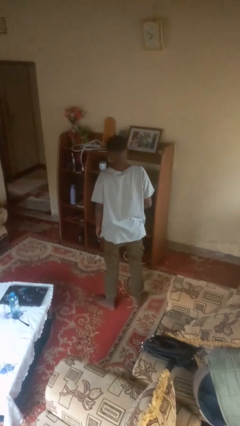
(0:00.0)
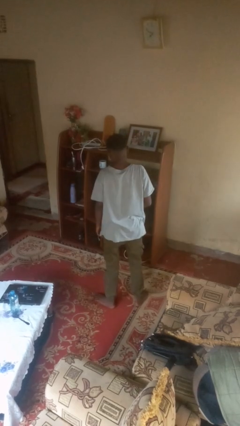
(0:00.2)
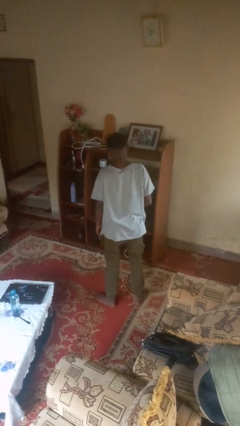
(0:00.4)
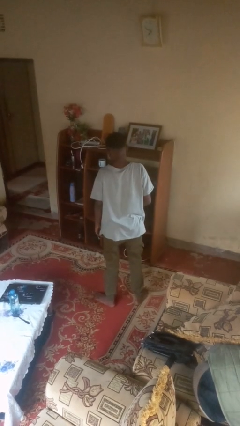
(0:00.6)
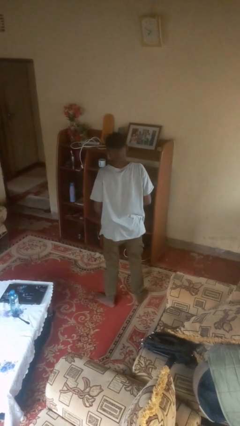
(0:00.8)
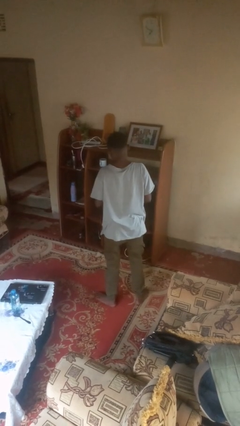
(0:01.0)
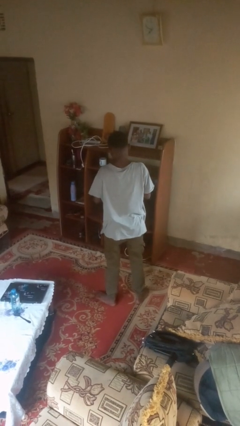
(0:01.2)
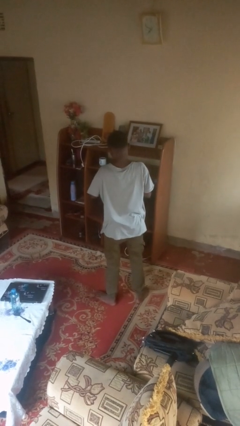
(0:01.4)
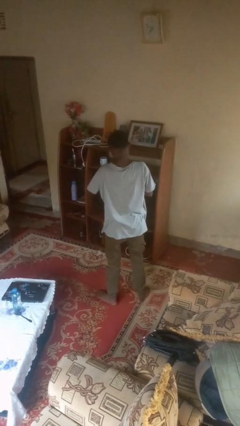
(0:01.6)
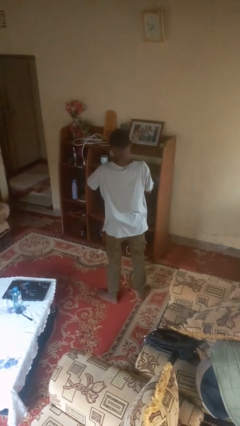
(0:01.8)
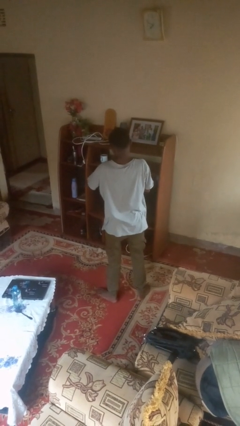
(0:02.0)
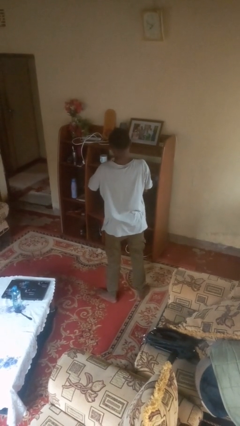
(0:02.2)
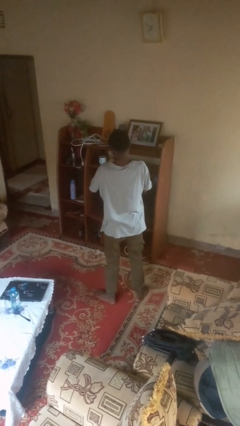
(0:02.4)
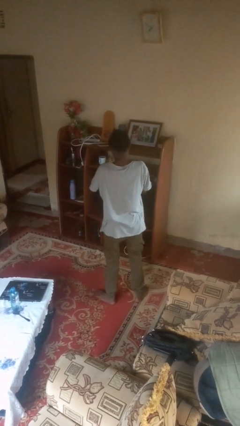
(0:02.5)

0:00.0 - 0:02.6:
person puts on wristwatch

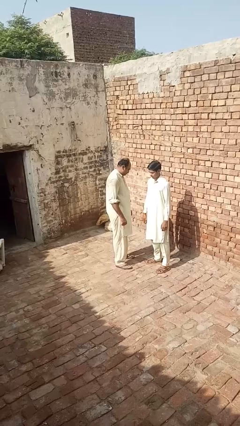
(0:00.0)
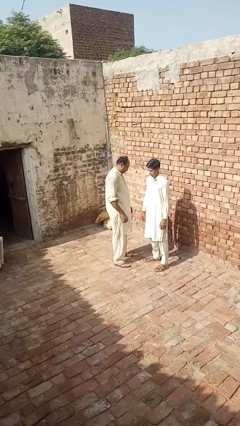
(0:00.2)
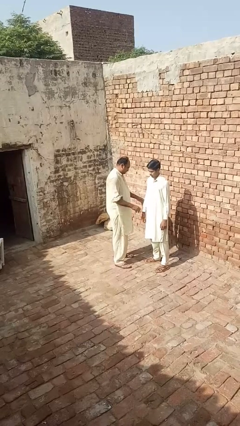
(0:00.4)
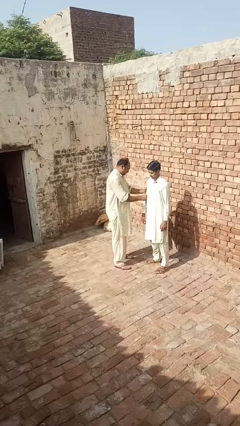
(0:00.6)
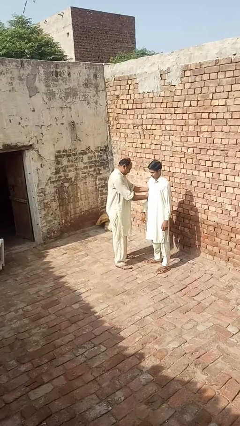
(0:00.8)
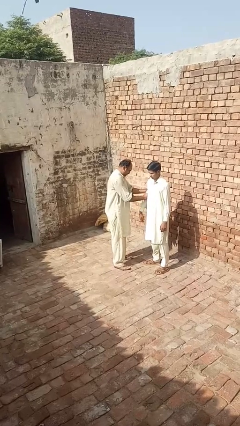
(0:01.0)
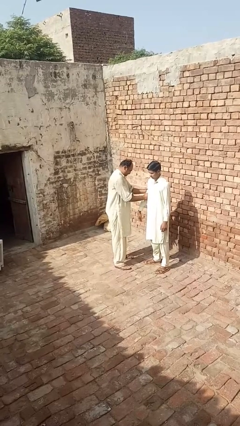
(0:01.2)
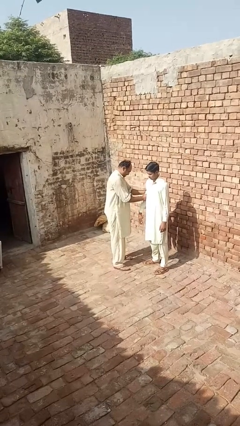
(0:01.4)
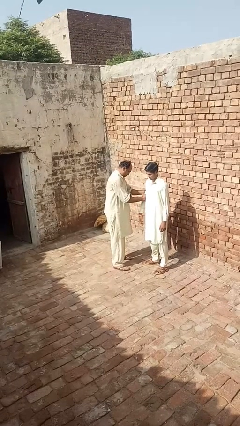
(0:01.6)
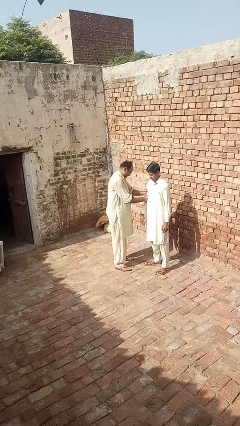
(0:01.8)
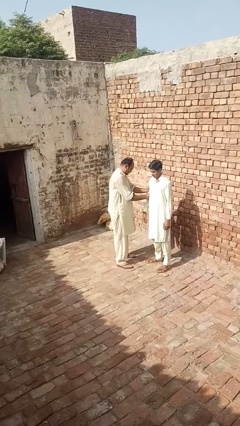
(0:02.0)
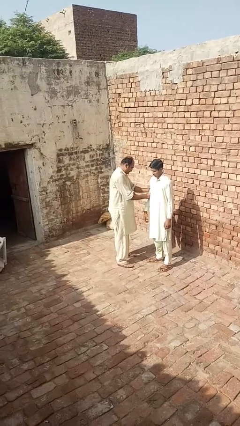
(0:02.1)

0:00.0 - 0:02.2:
person grabs person by bicep

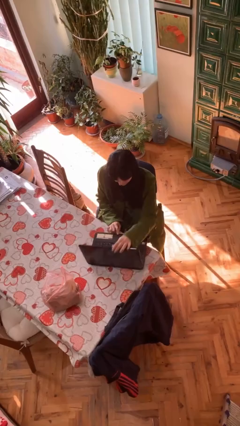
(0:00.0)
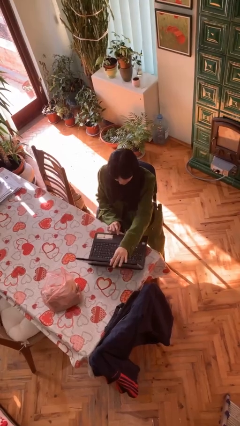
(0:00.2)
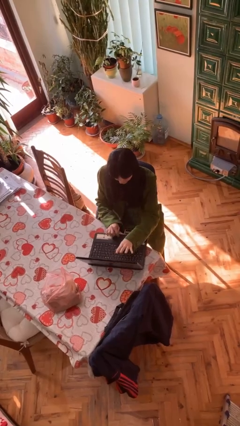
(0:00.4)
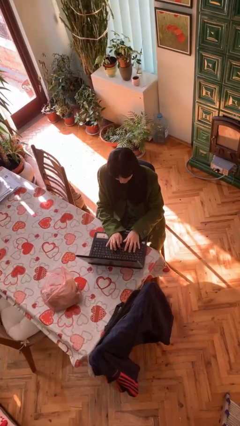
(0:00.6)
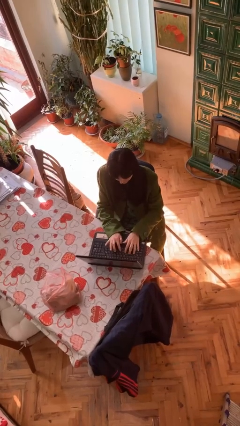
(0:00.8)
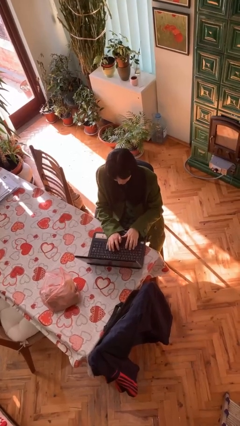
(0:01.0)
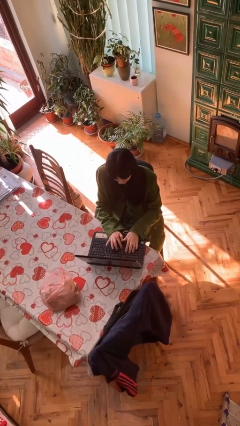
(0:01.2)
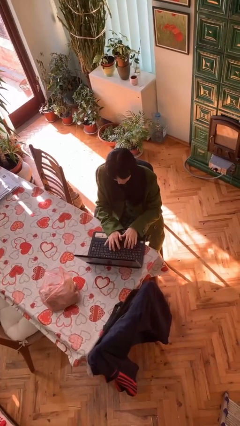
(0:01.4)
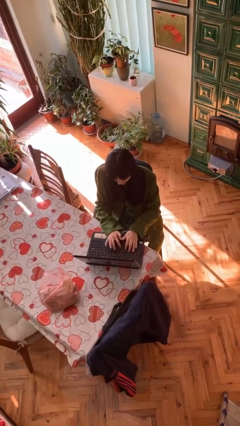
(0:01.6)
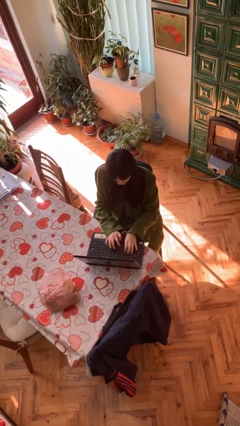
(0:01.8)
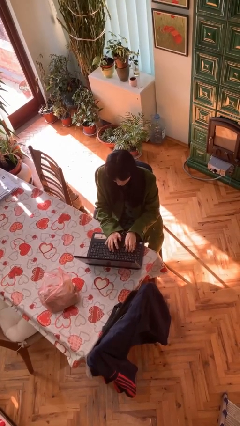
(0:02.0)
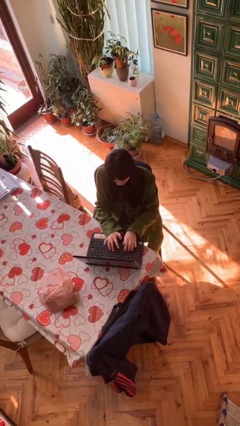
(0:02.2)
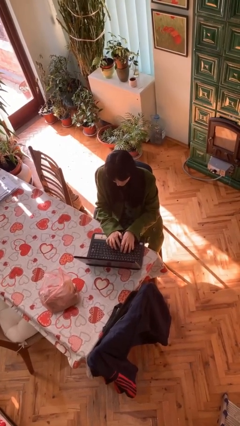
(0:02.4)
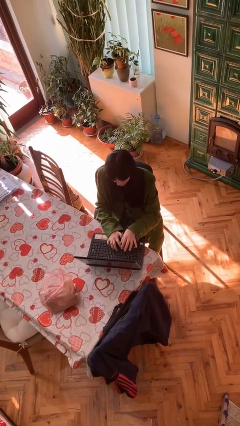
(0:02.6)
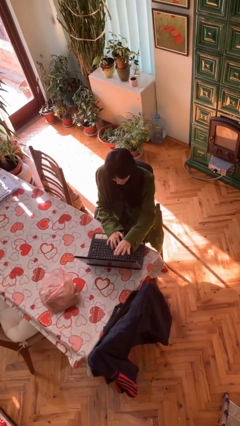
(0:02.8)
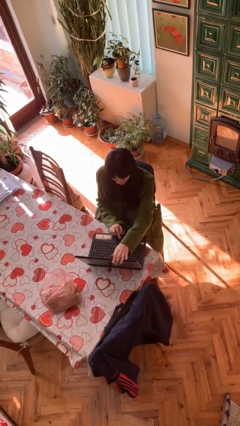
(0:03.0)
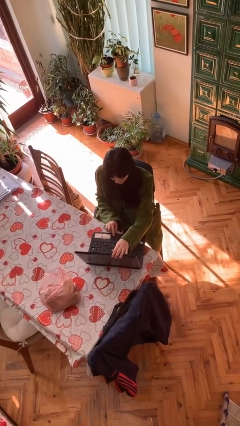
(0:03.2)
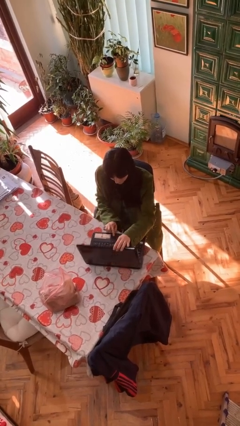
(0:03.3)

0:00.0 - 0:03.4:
person interacts with laptop

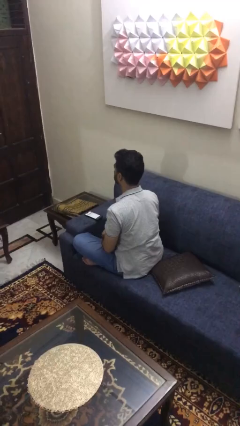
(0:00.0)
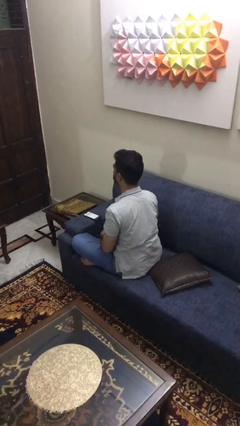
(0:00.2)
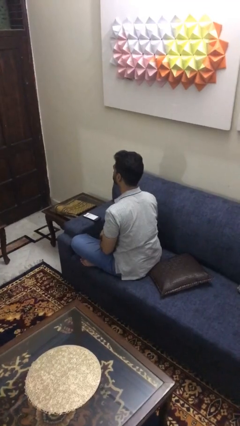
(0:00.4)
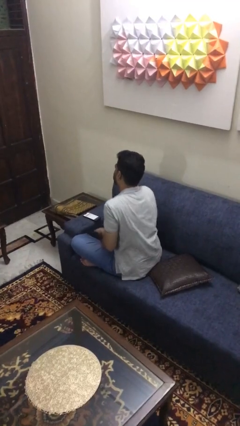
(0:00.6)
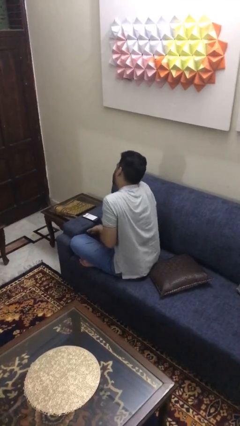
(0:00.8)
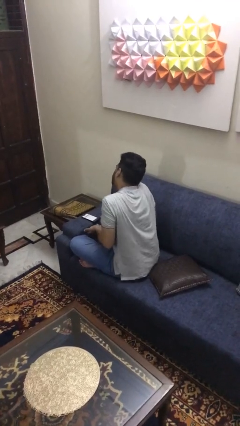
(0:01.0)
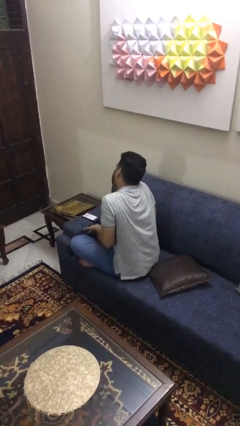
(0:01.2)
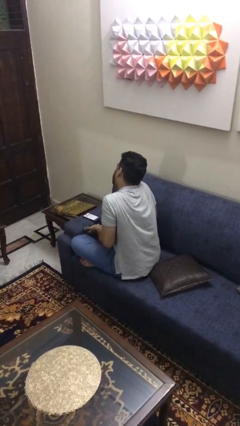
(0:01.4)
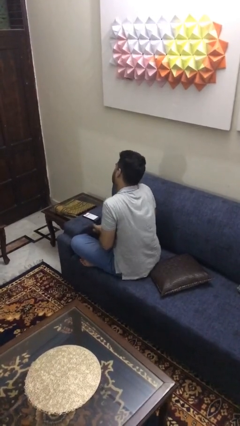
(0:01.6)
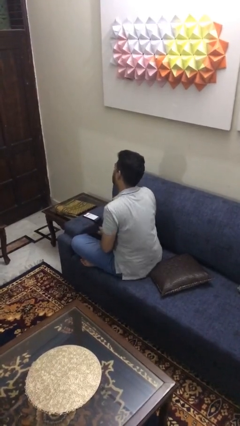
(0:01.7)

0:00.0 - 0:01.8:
person shrugs

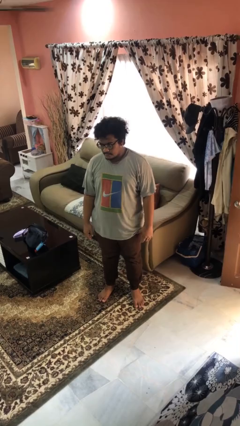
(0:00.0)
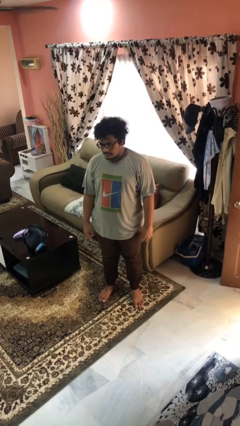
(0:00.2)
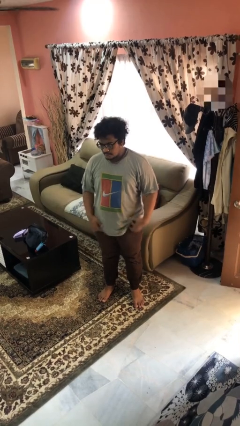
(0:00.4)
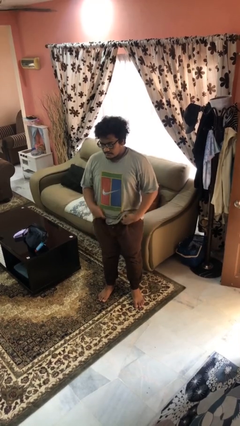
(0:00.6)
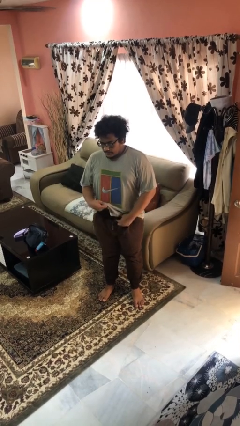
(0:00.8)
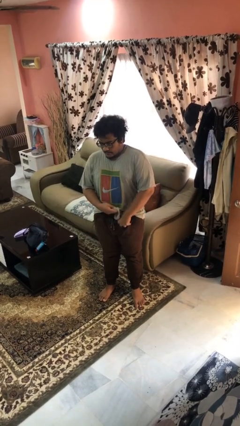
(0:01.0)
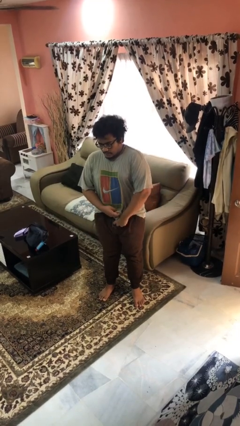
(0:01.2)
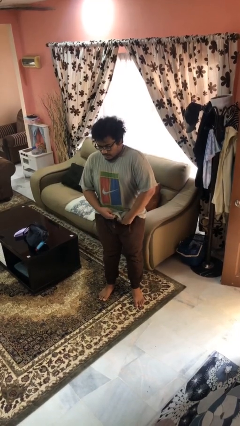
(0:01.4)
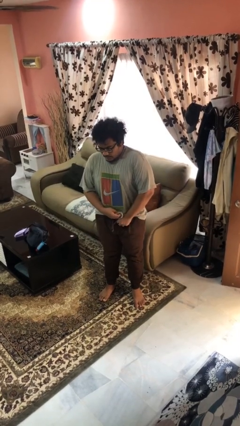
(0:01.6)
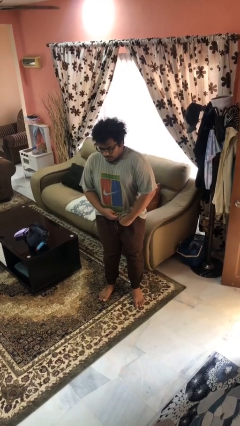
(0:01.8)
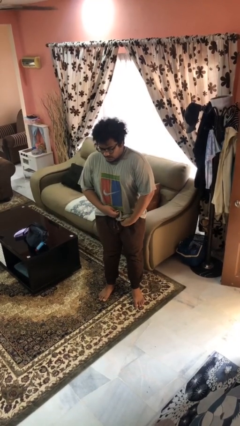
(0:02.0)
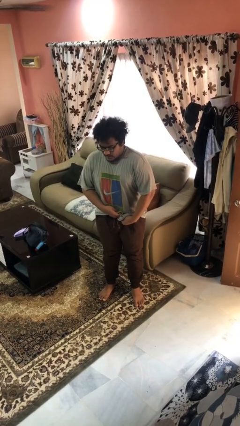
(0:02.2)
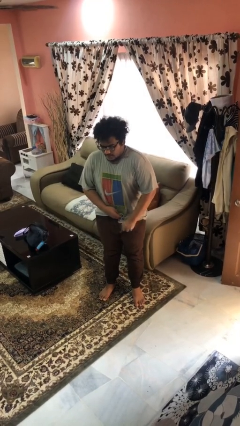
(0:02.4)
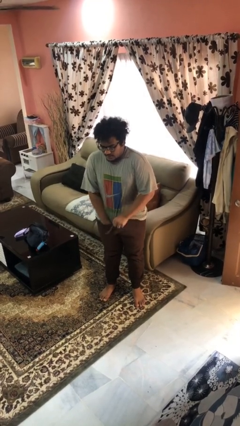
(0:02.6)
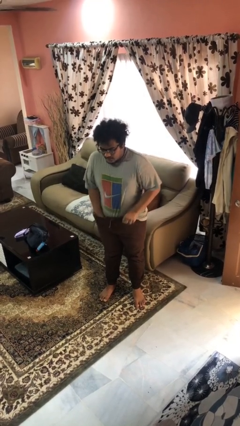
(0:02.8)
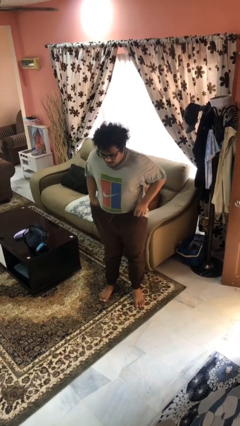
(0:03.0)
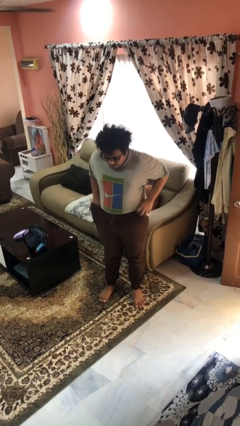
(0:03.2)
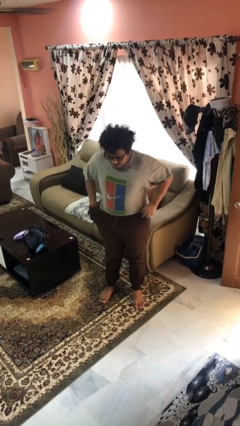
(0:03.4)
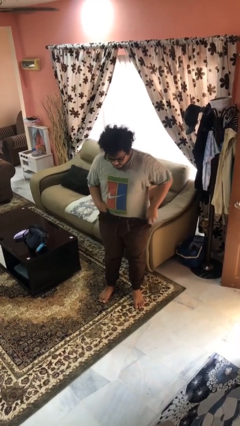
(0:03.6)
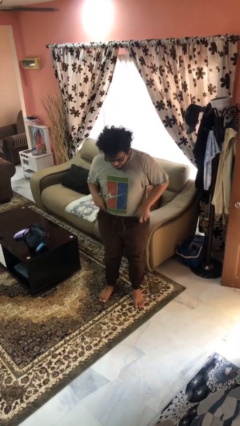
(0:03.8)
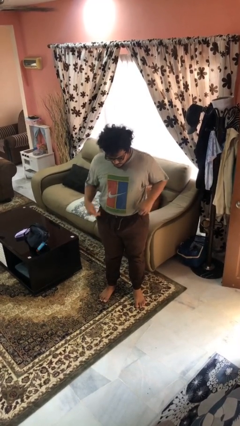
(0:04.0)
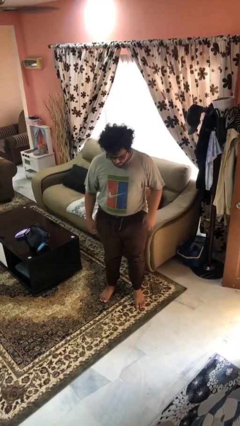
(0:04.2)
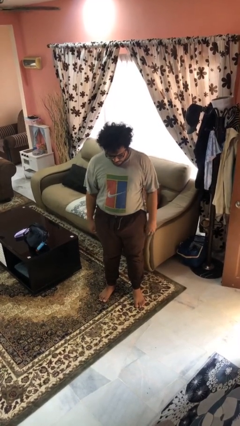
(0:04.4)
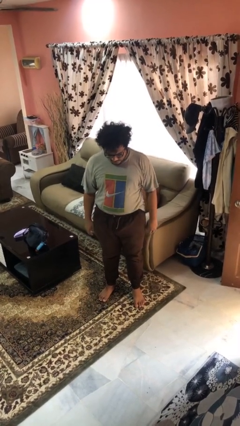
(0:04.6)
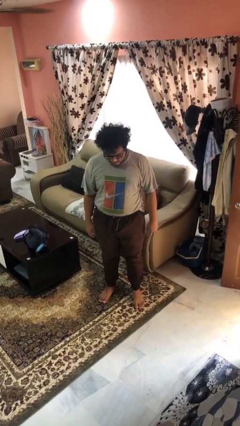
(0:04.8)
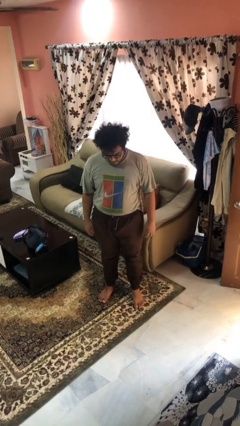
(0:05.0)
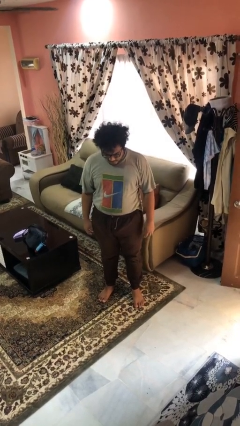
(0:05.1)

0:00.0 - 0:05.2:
person tucks in shirt

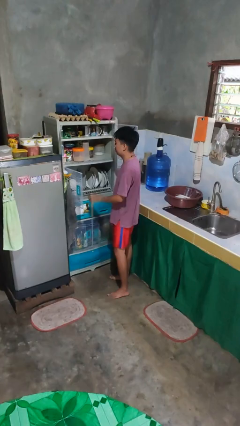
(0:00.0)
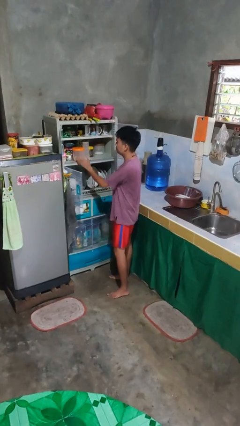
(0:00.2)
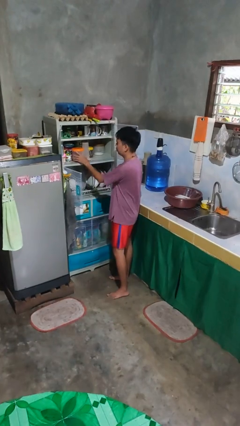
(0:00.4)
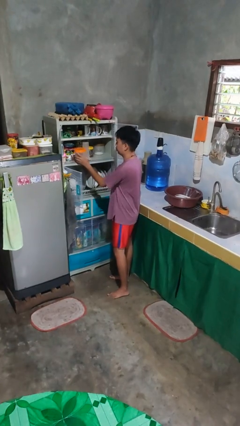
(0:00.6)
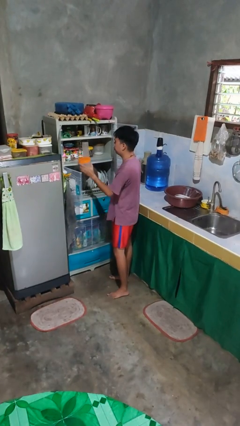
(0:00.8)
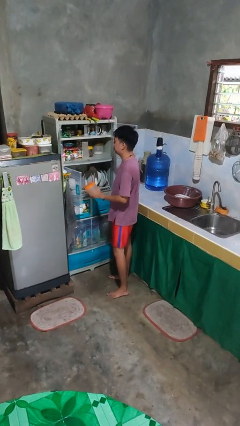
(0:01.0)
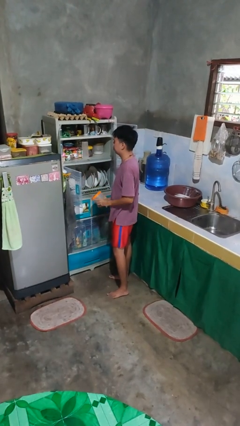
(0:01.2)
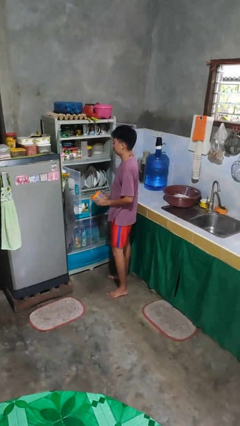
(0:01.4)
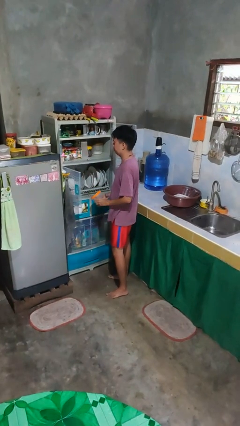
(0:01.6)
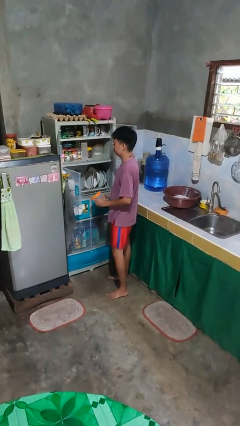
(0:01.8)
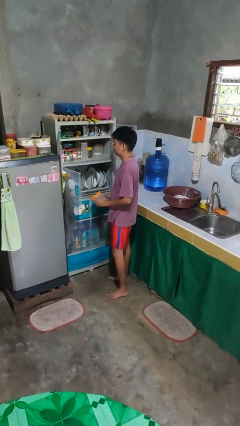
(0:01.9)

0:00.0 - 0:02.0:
person takes object from cabinet
